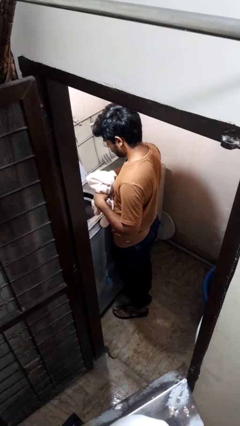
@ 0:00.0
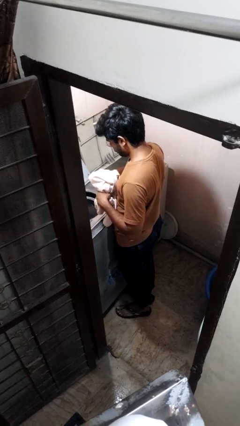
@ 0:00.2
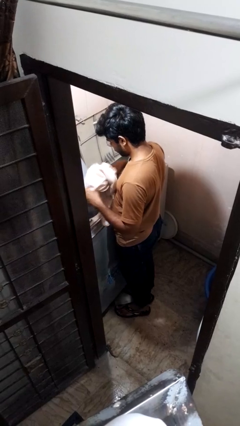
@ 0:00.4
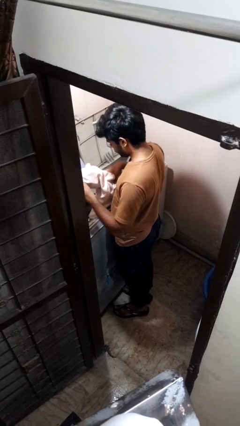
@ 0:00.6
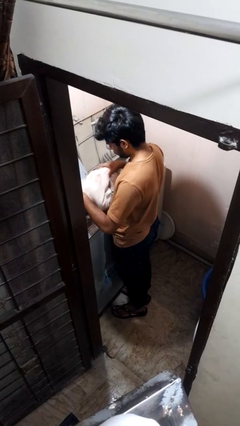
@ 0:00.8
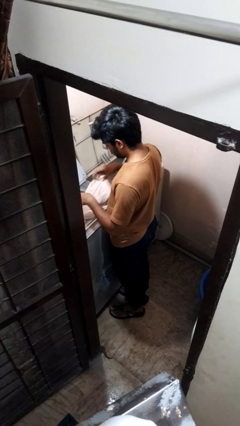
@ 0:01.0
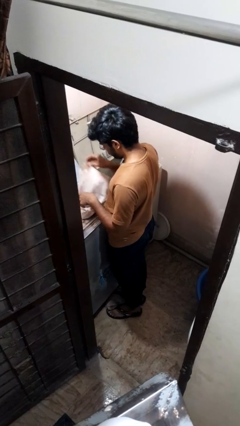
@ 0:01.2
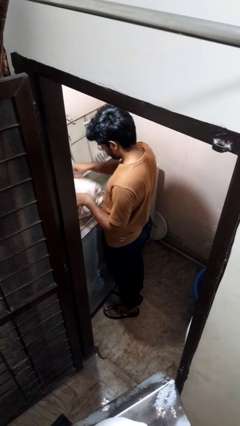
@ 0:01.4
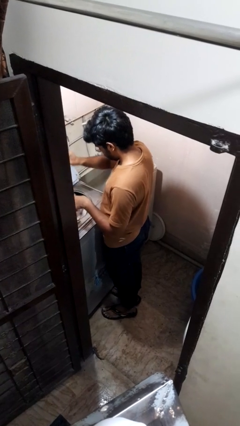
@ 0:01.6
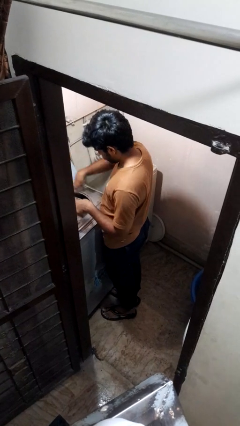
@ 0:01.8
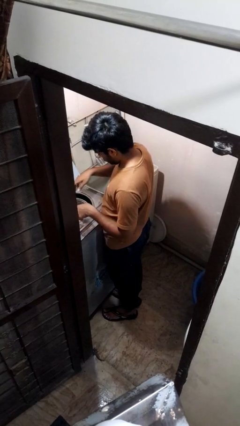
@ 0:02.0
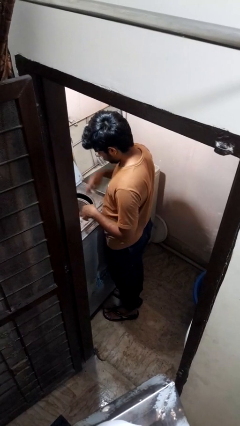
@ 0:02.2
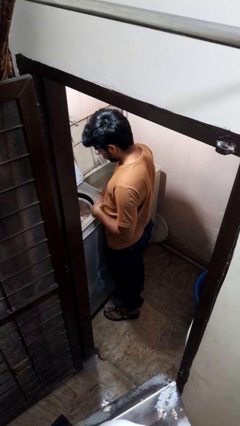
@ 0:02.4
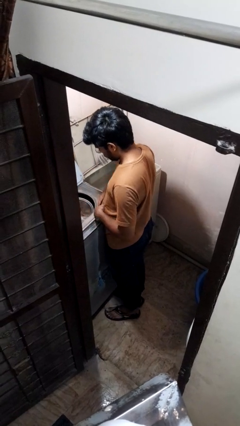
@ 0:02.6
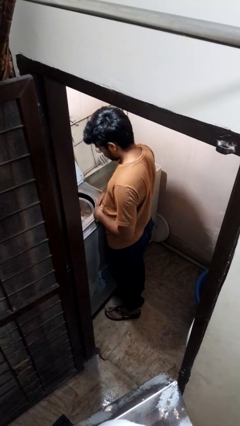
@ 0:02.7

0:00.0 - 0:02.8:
person loads dryer

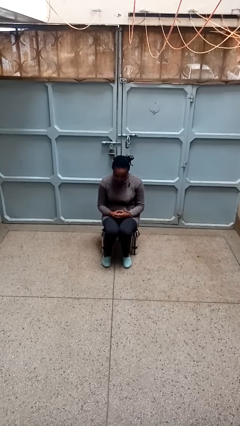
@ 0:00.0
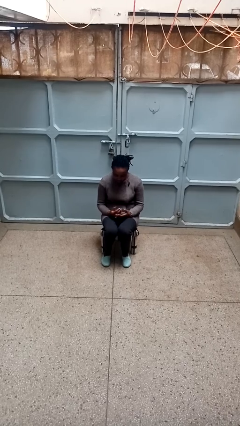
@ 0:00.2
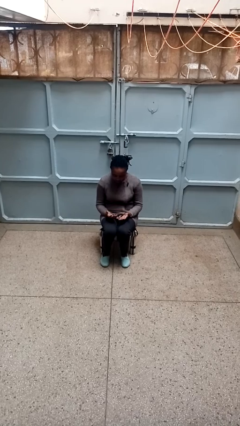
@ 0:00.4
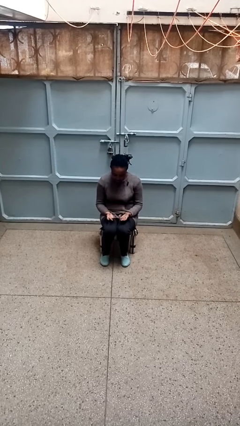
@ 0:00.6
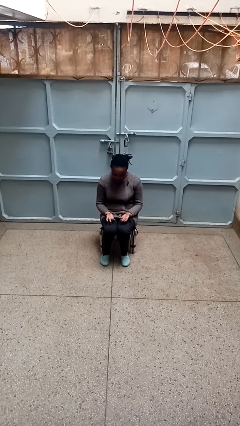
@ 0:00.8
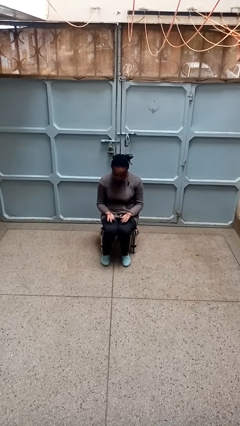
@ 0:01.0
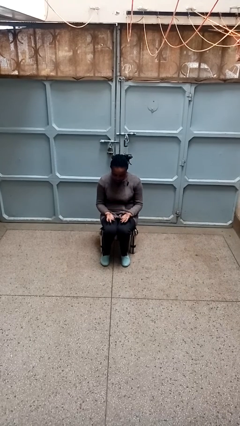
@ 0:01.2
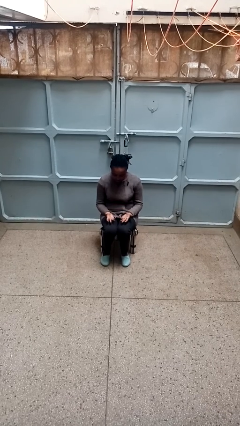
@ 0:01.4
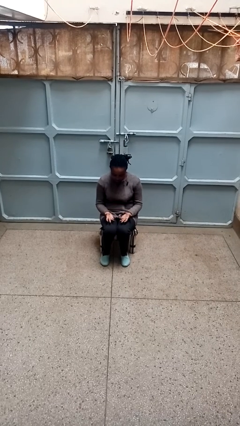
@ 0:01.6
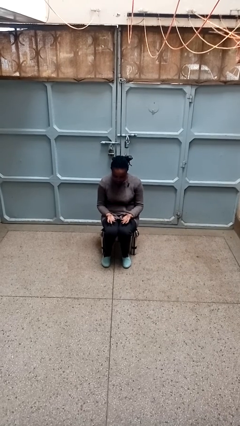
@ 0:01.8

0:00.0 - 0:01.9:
person looks at hands in lap

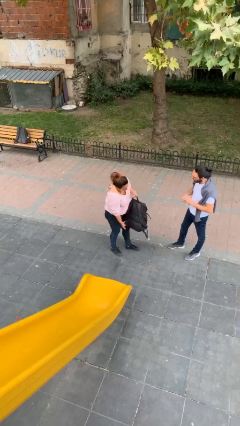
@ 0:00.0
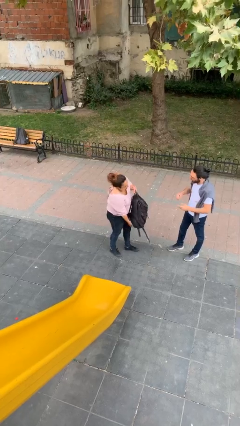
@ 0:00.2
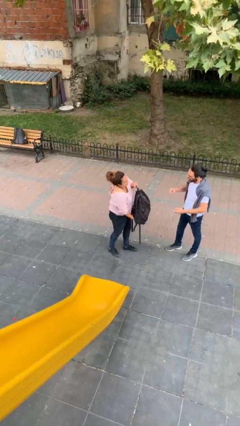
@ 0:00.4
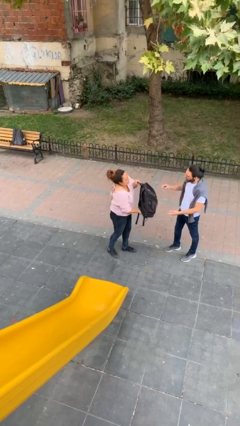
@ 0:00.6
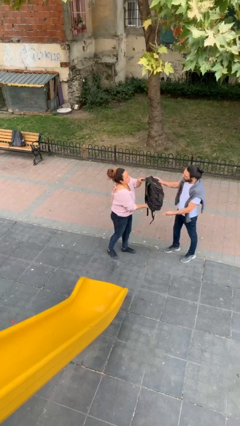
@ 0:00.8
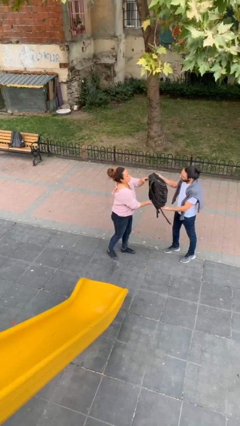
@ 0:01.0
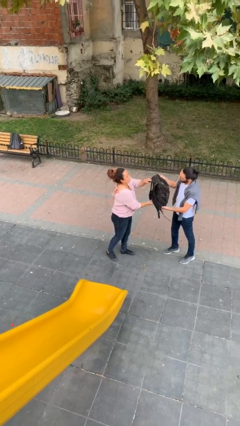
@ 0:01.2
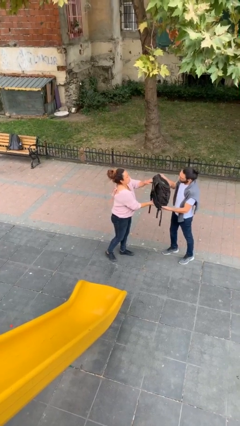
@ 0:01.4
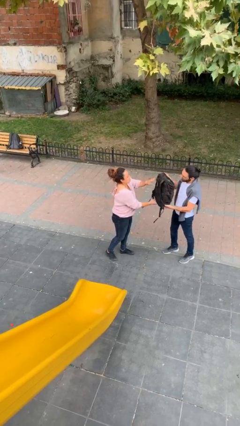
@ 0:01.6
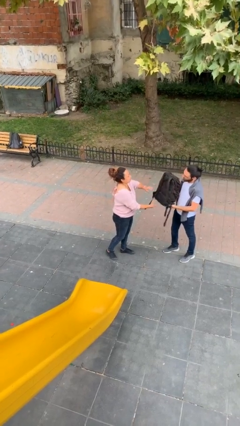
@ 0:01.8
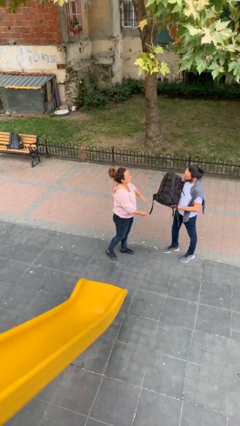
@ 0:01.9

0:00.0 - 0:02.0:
person transfers object to person

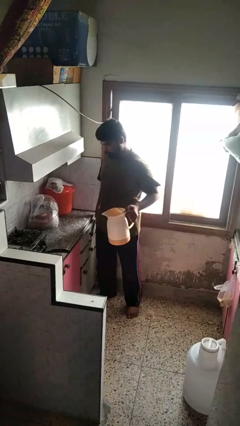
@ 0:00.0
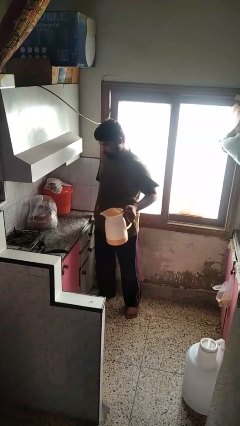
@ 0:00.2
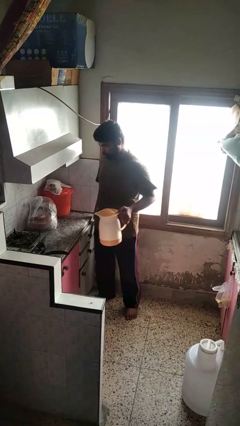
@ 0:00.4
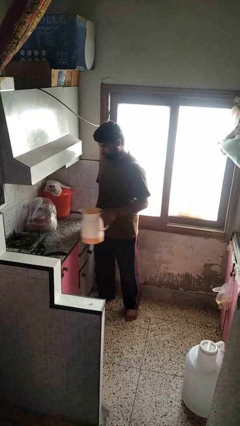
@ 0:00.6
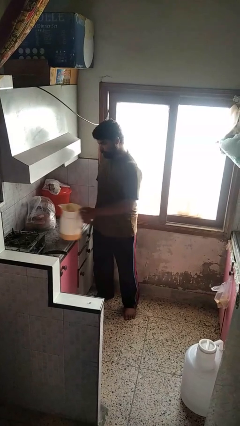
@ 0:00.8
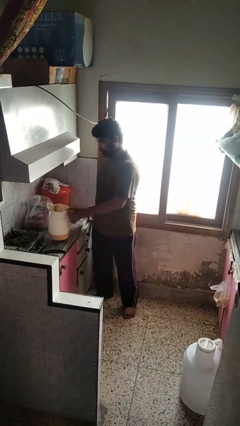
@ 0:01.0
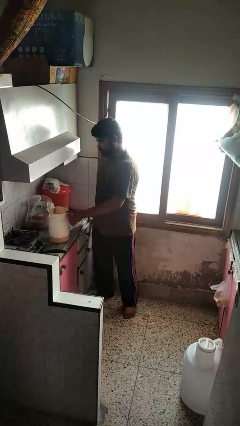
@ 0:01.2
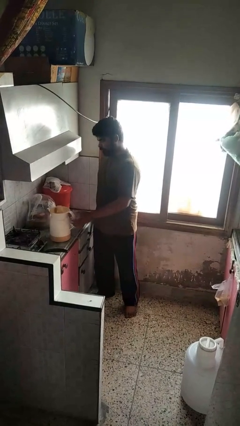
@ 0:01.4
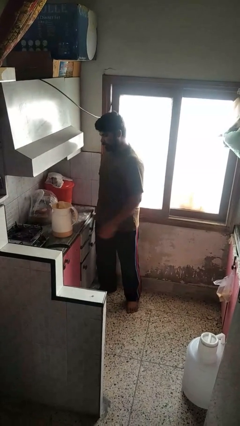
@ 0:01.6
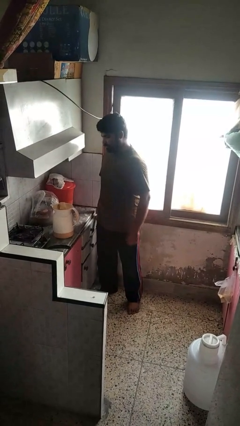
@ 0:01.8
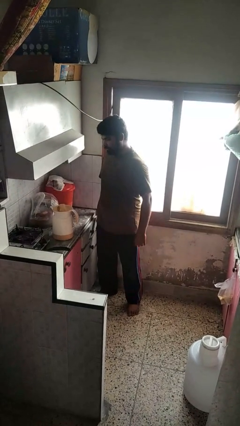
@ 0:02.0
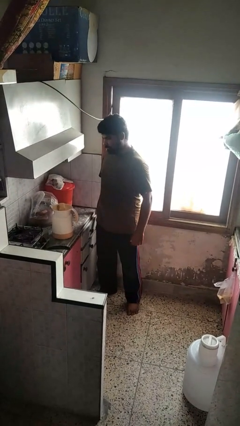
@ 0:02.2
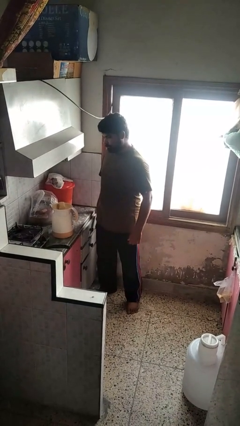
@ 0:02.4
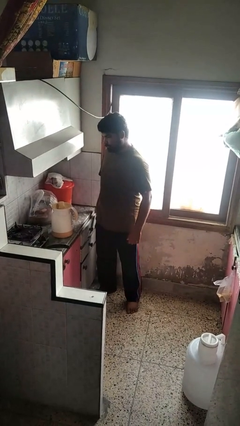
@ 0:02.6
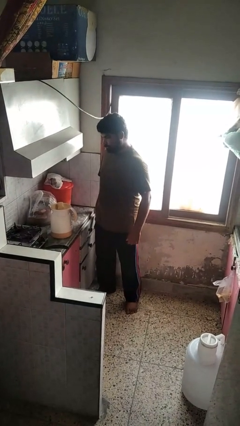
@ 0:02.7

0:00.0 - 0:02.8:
person puts down object on countertop

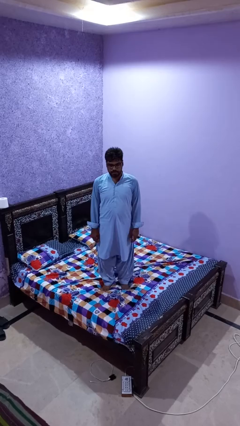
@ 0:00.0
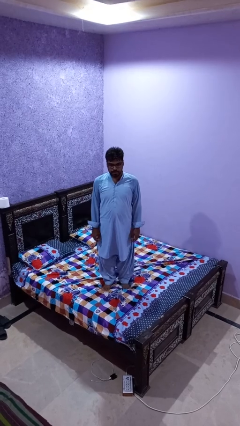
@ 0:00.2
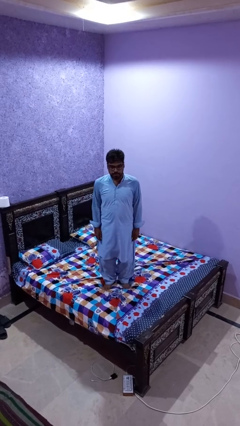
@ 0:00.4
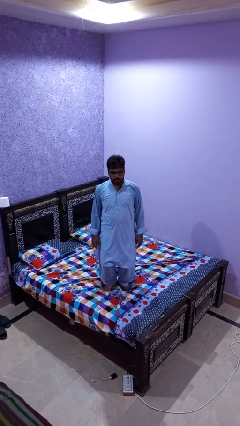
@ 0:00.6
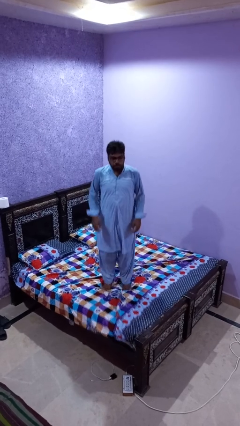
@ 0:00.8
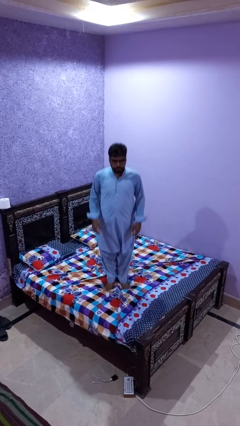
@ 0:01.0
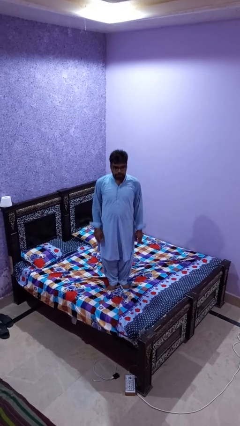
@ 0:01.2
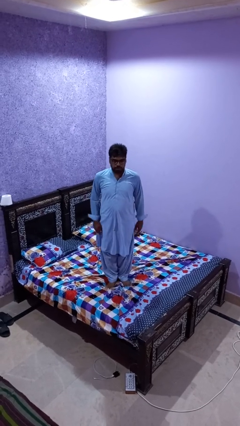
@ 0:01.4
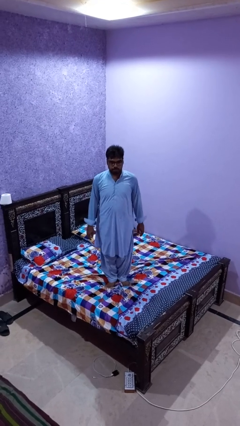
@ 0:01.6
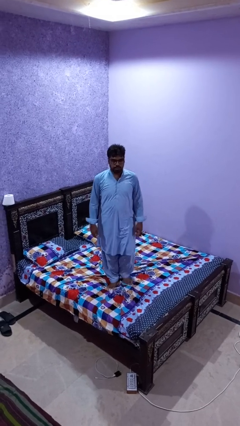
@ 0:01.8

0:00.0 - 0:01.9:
person jumps on bed

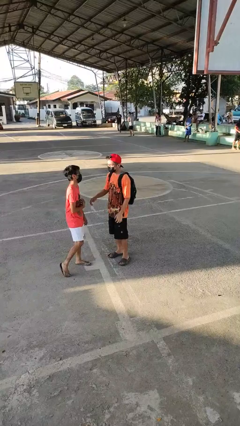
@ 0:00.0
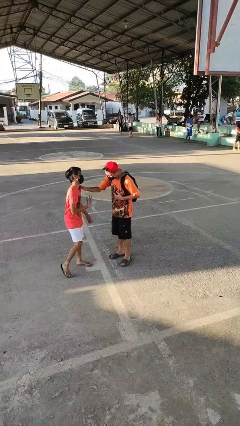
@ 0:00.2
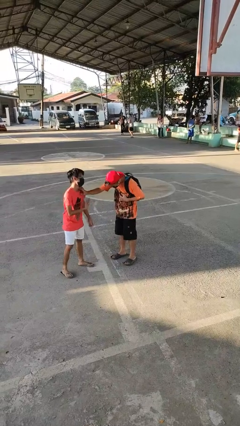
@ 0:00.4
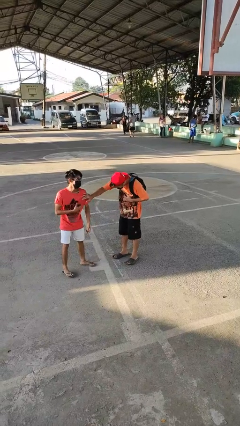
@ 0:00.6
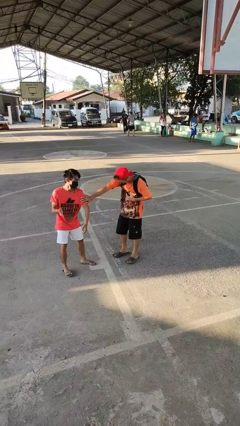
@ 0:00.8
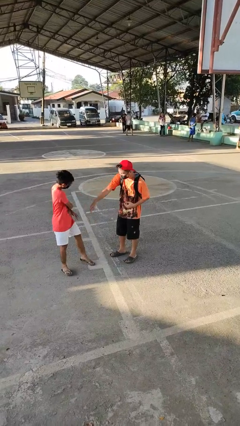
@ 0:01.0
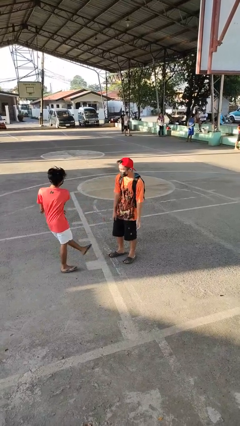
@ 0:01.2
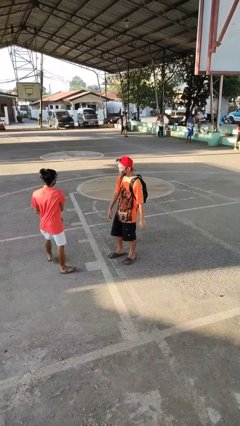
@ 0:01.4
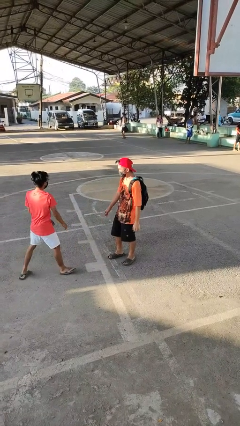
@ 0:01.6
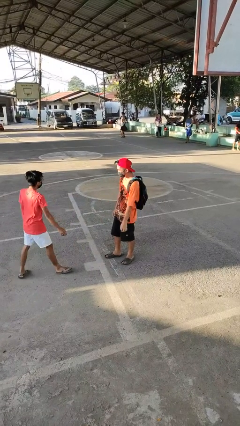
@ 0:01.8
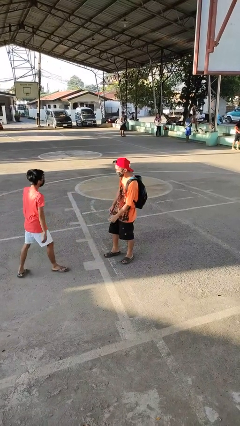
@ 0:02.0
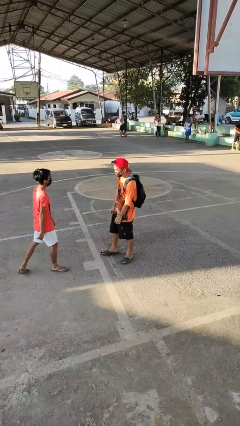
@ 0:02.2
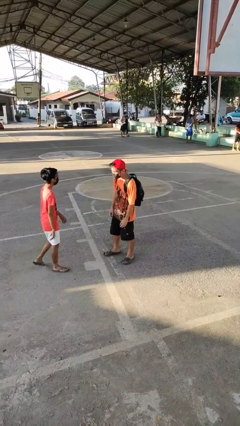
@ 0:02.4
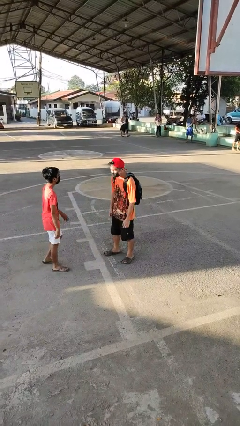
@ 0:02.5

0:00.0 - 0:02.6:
person laughs with person

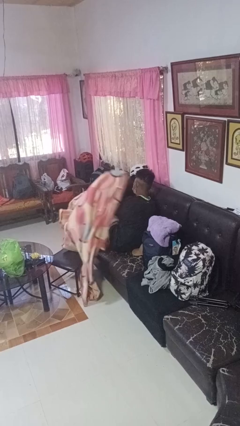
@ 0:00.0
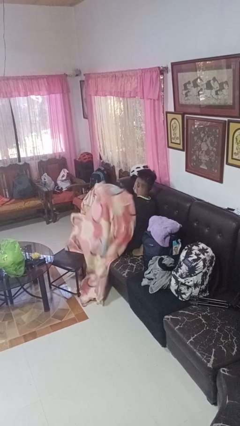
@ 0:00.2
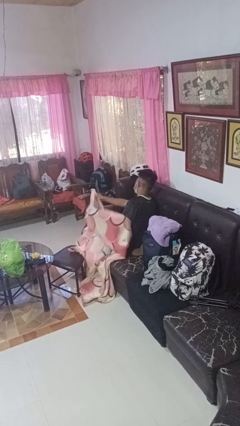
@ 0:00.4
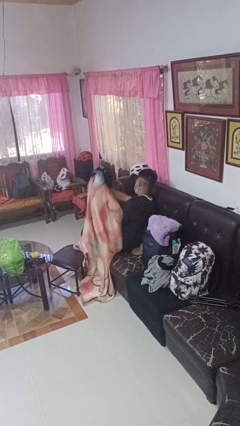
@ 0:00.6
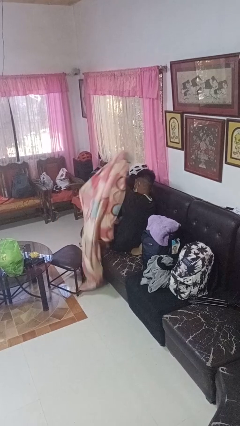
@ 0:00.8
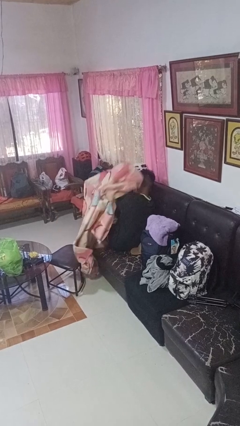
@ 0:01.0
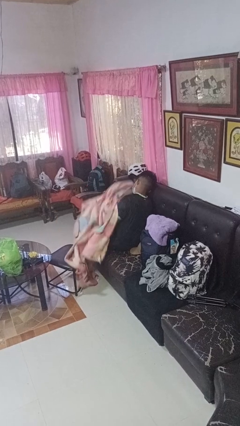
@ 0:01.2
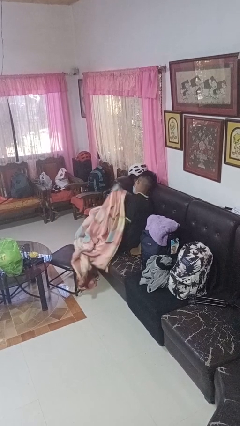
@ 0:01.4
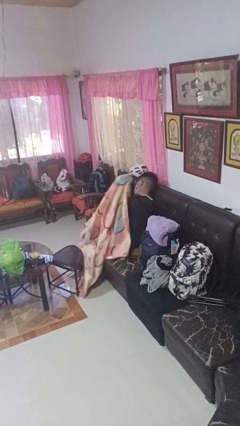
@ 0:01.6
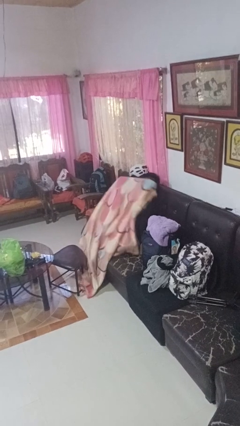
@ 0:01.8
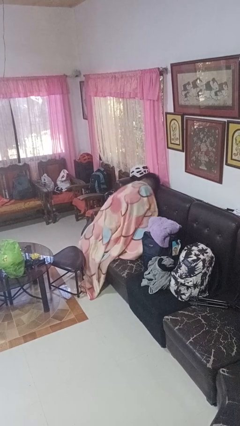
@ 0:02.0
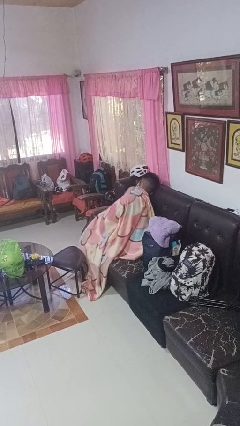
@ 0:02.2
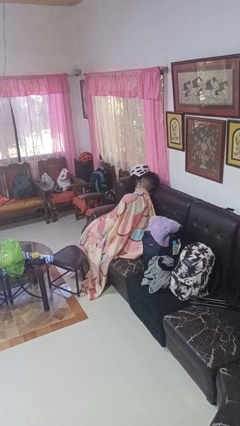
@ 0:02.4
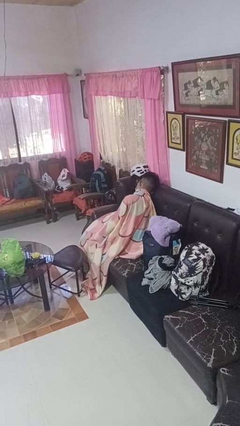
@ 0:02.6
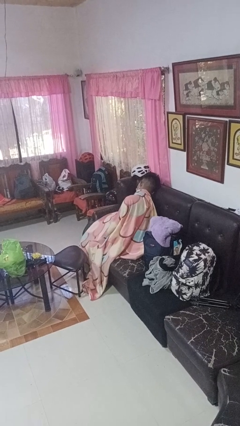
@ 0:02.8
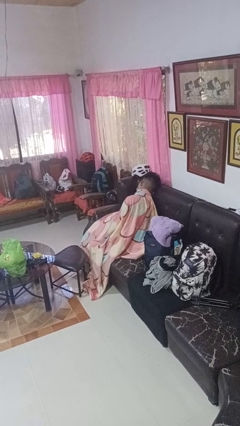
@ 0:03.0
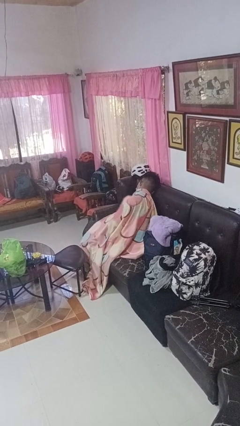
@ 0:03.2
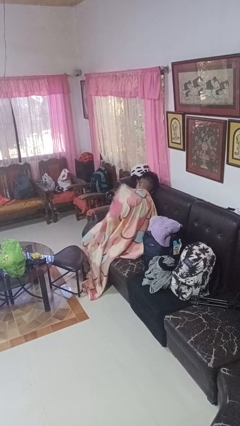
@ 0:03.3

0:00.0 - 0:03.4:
person covers with blanket
